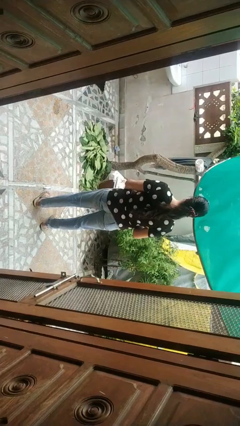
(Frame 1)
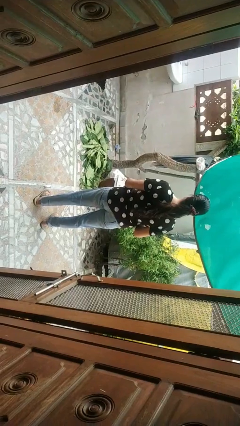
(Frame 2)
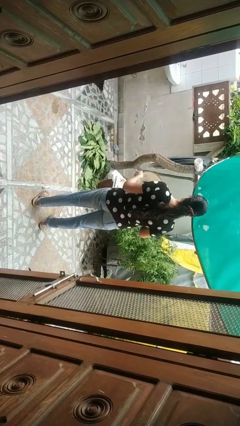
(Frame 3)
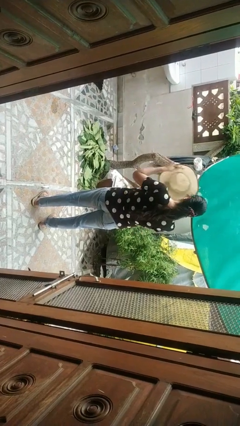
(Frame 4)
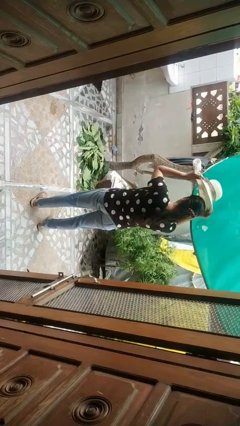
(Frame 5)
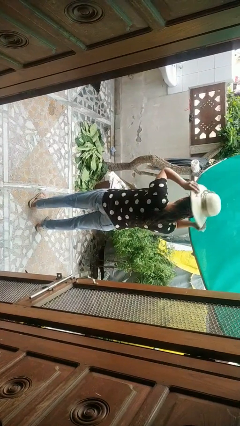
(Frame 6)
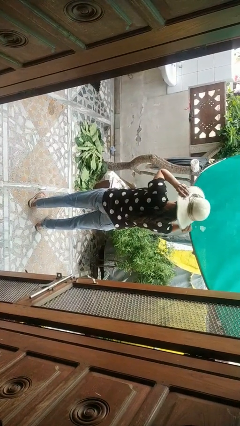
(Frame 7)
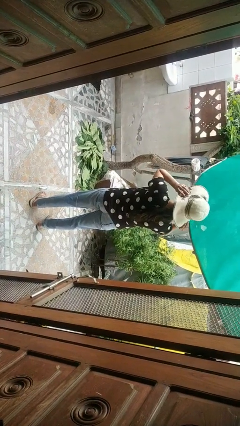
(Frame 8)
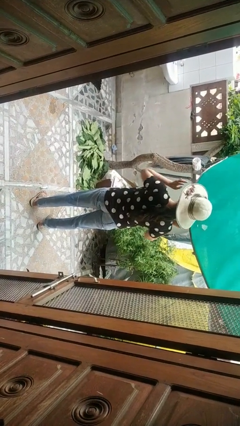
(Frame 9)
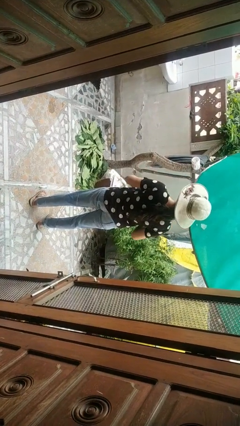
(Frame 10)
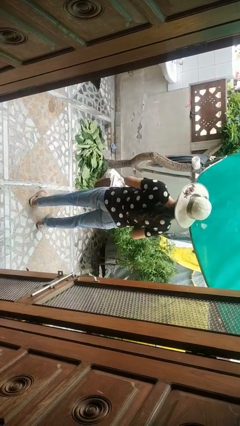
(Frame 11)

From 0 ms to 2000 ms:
person puts on hat

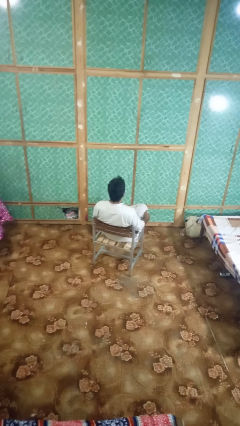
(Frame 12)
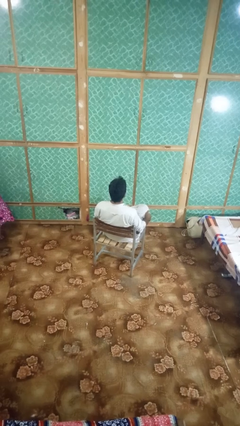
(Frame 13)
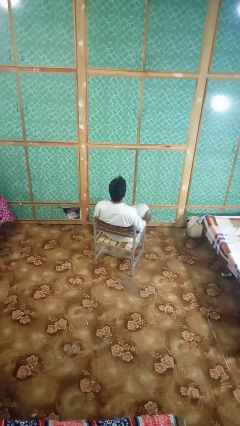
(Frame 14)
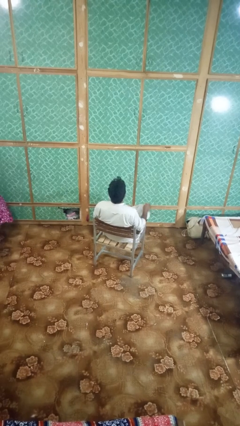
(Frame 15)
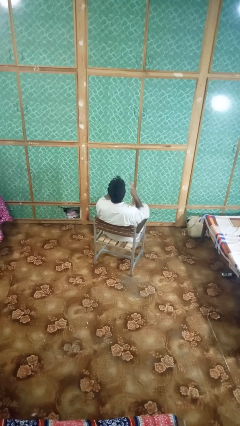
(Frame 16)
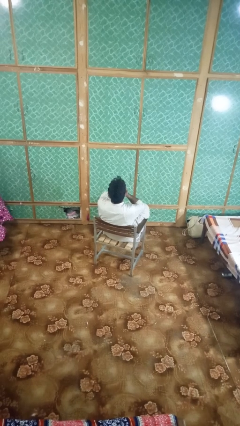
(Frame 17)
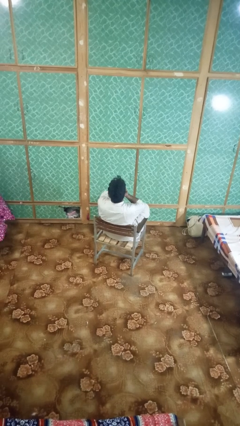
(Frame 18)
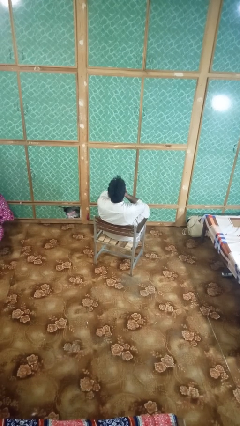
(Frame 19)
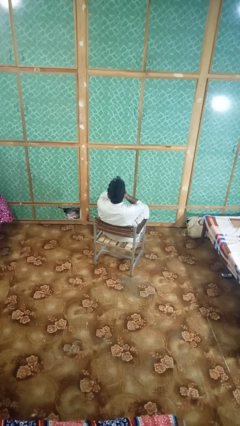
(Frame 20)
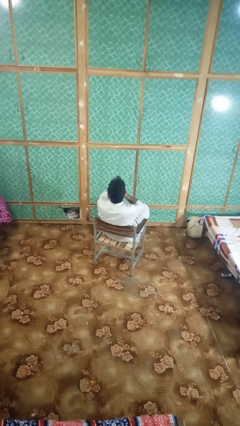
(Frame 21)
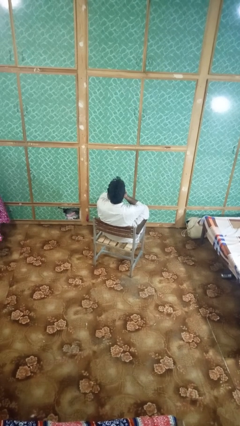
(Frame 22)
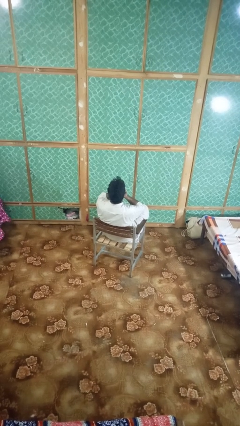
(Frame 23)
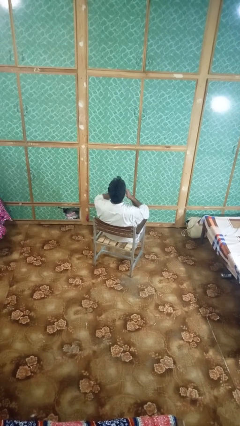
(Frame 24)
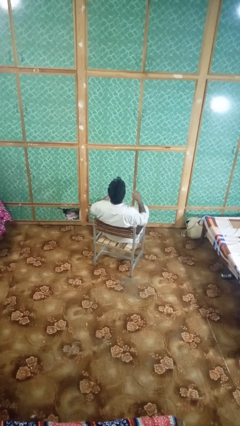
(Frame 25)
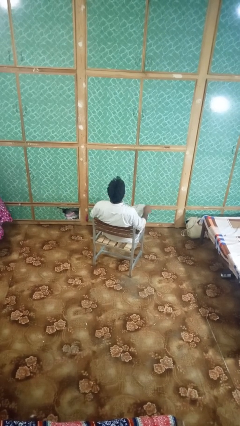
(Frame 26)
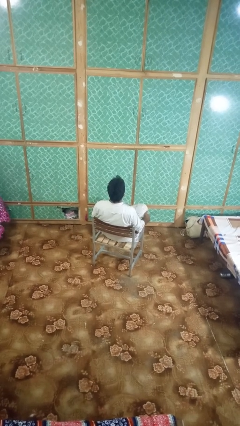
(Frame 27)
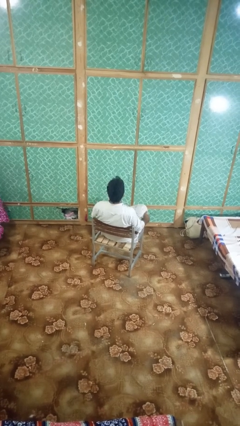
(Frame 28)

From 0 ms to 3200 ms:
person sneezes into hand

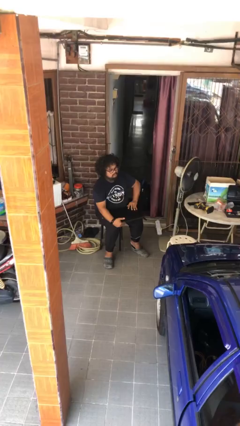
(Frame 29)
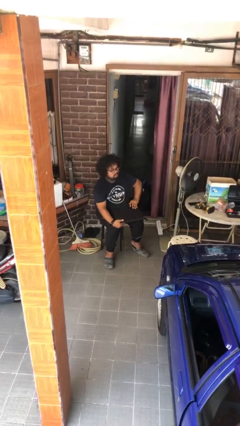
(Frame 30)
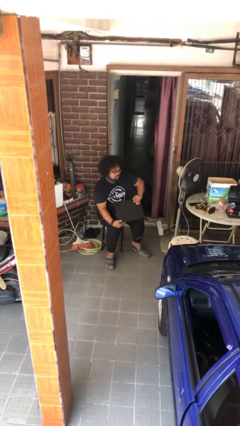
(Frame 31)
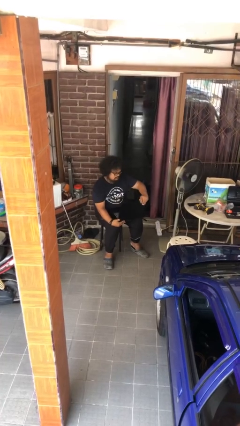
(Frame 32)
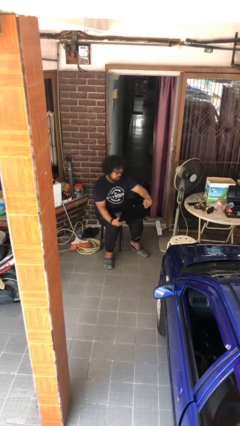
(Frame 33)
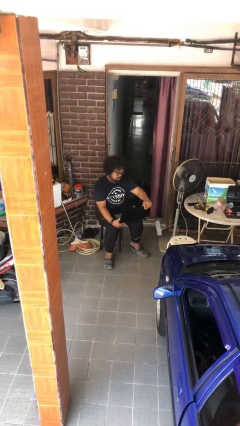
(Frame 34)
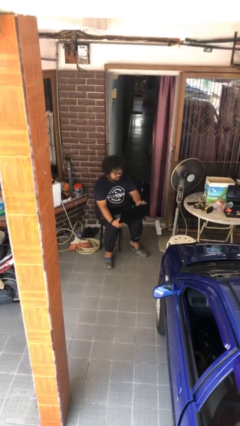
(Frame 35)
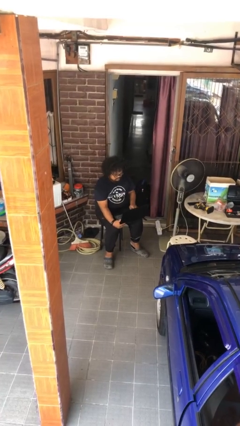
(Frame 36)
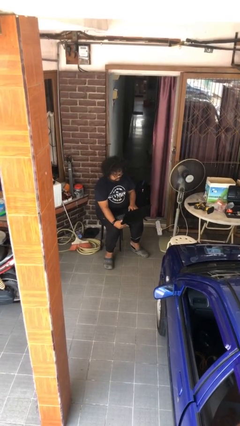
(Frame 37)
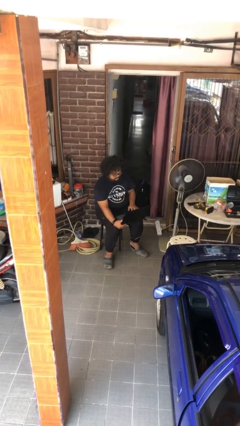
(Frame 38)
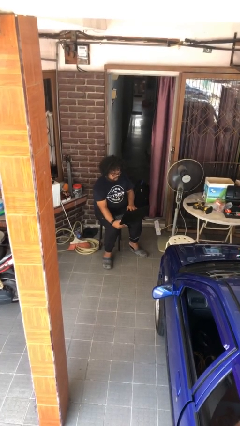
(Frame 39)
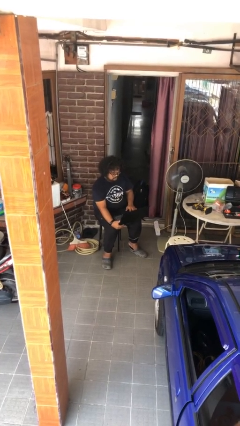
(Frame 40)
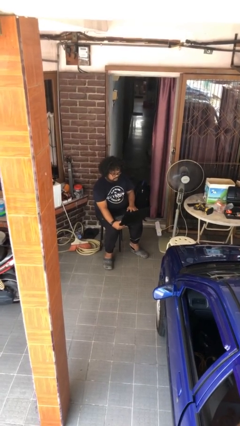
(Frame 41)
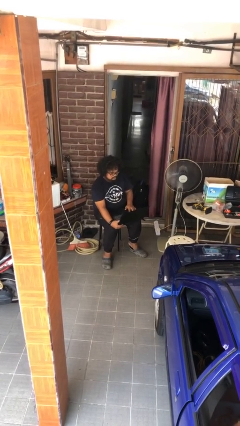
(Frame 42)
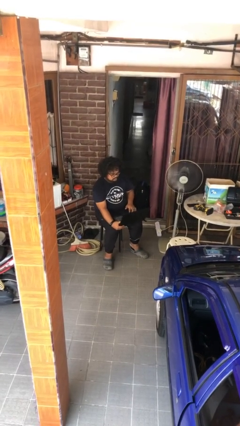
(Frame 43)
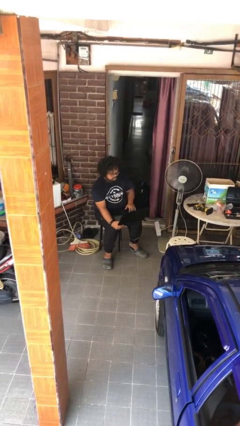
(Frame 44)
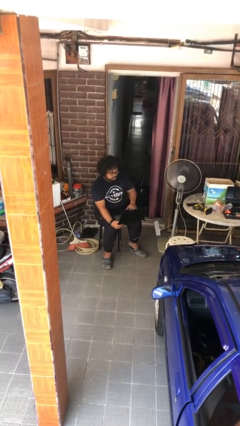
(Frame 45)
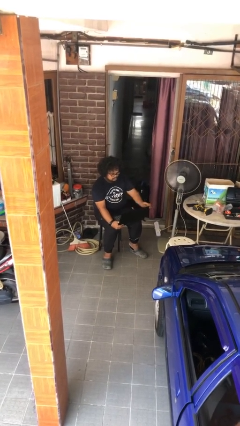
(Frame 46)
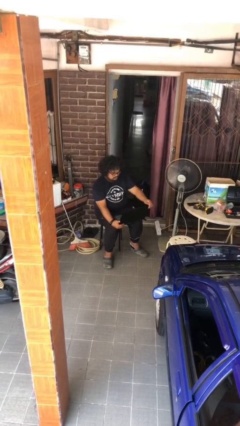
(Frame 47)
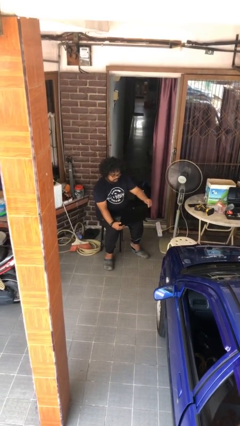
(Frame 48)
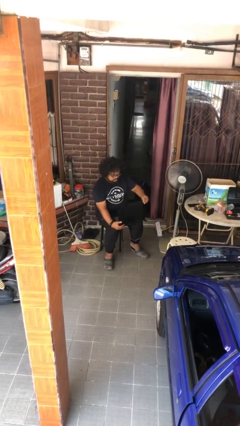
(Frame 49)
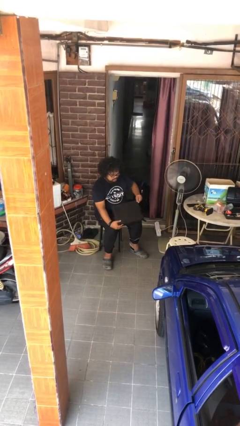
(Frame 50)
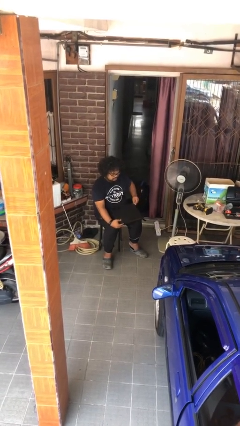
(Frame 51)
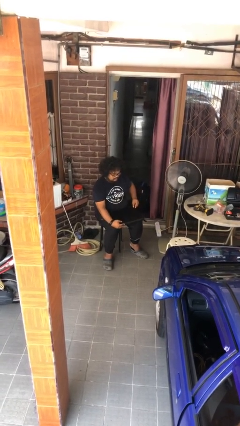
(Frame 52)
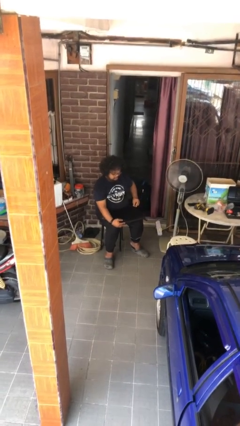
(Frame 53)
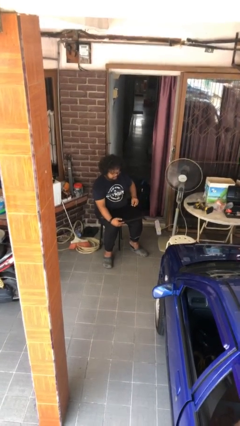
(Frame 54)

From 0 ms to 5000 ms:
person interacts with laptop

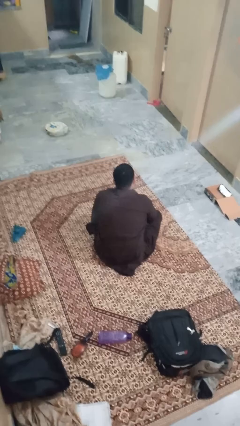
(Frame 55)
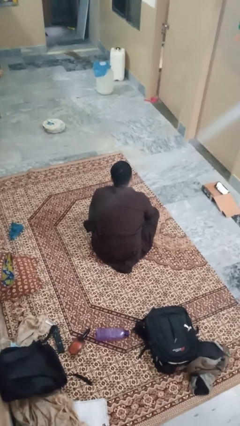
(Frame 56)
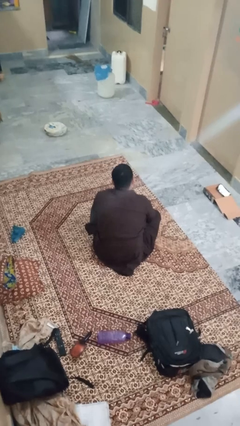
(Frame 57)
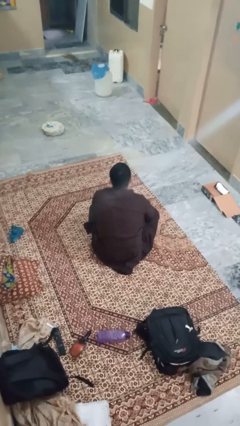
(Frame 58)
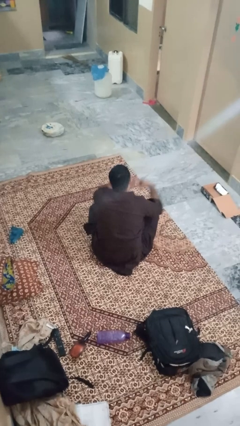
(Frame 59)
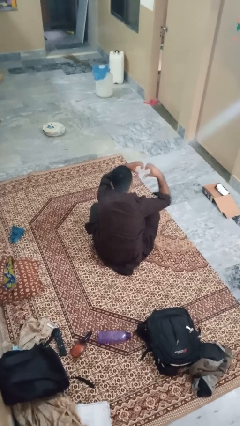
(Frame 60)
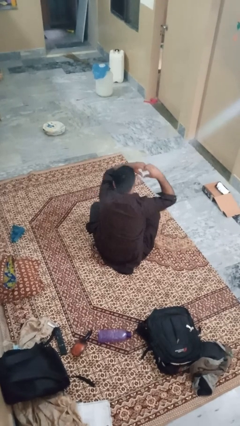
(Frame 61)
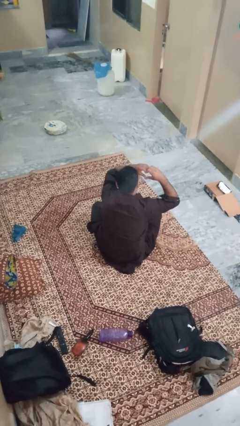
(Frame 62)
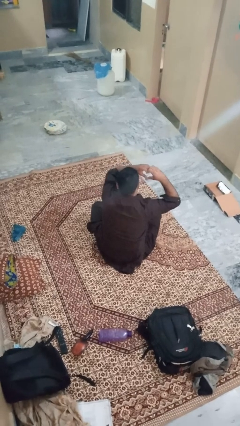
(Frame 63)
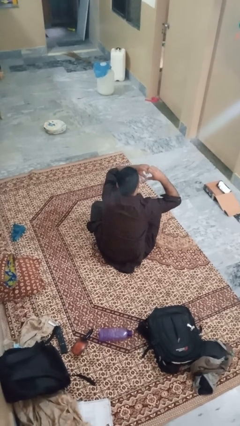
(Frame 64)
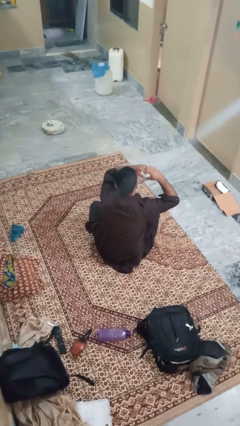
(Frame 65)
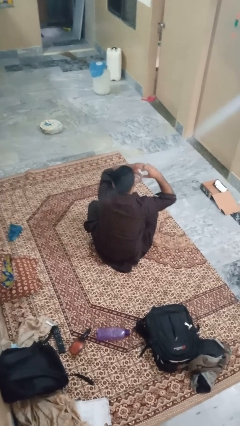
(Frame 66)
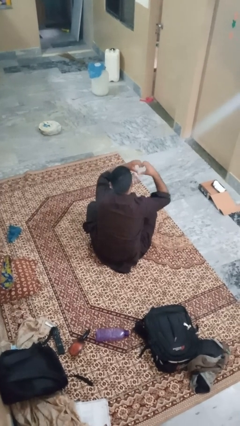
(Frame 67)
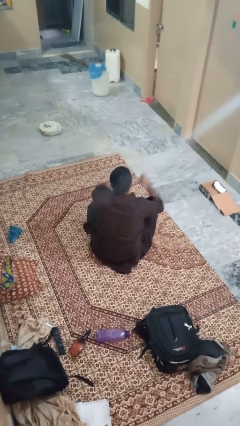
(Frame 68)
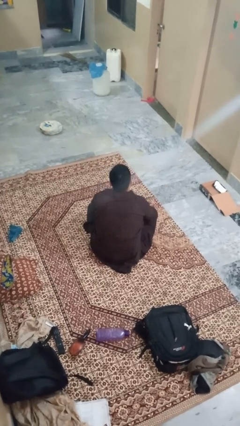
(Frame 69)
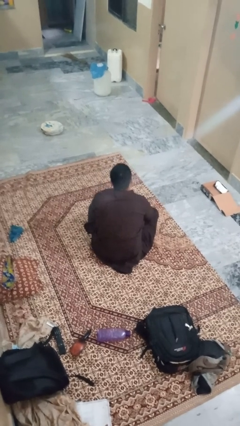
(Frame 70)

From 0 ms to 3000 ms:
person gestures heart

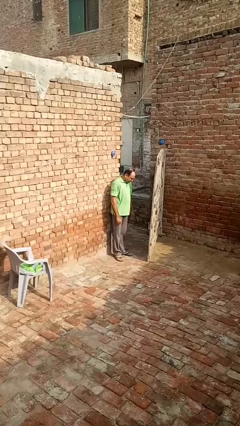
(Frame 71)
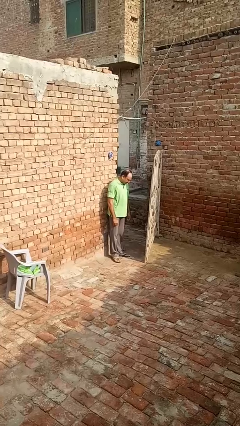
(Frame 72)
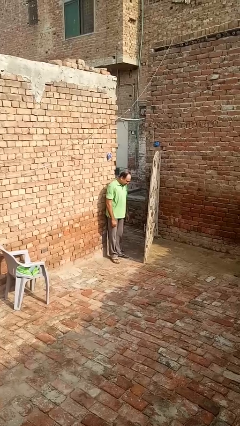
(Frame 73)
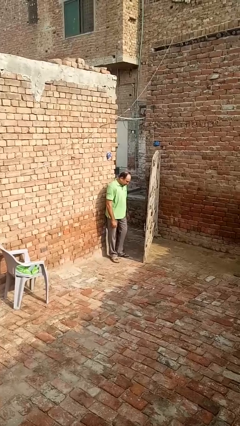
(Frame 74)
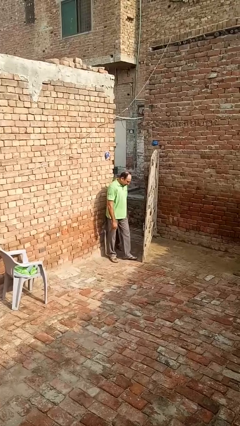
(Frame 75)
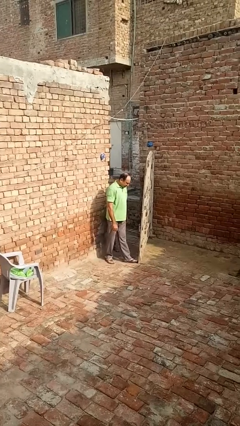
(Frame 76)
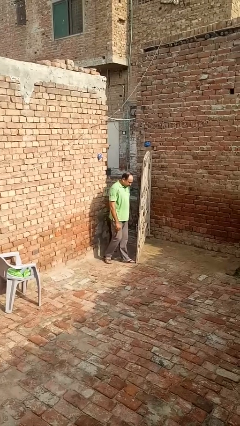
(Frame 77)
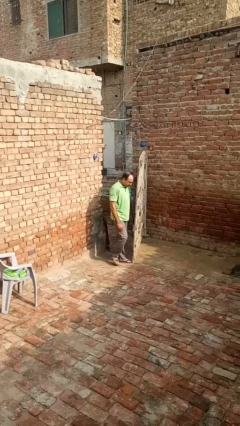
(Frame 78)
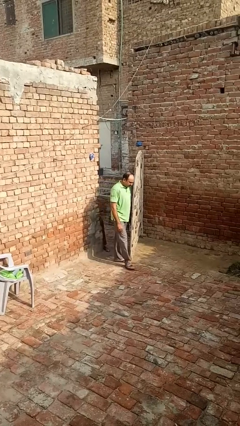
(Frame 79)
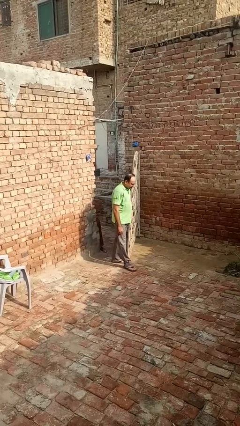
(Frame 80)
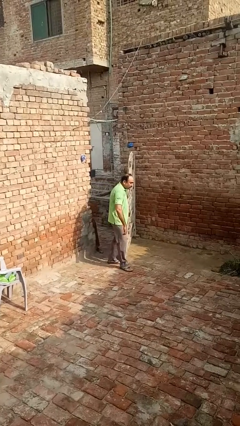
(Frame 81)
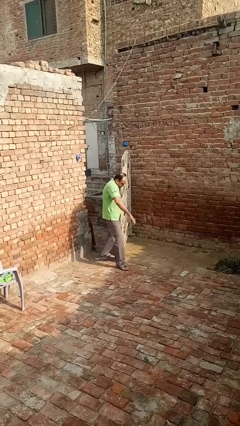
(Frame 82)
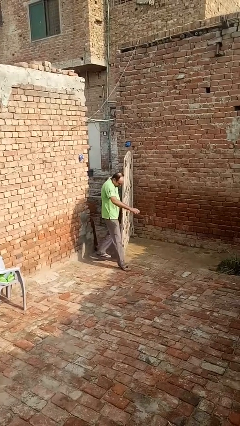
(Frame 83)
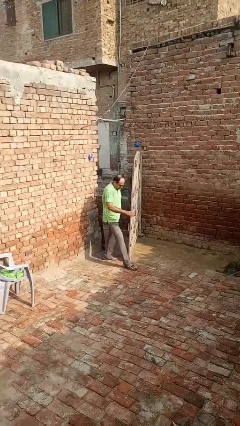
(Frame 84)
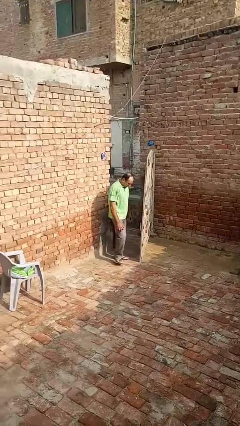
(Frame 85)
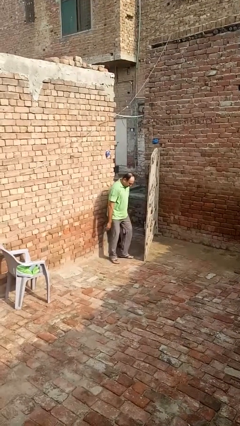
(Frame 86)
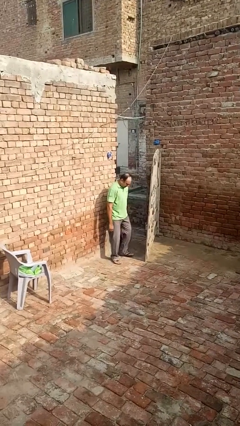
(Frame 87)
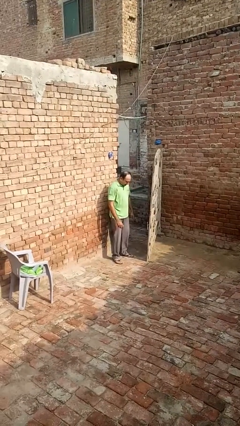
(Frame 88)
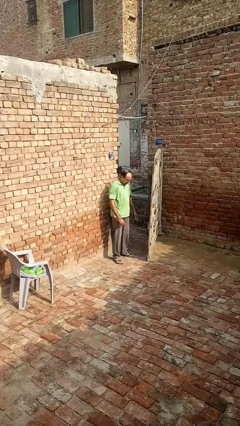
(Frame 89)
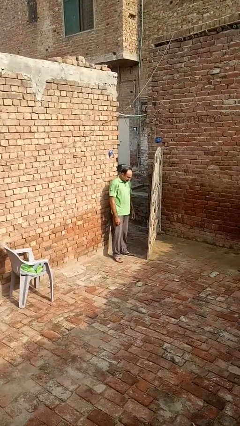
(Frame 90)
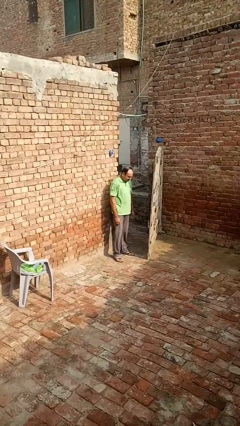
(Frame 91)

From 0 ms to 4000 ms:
person bumps into wall

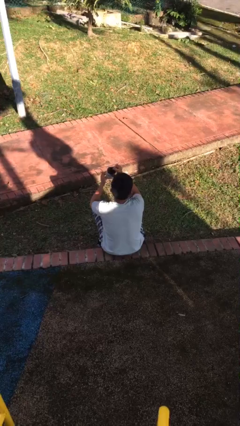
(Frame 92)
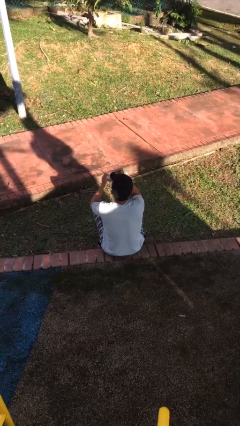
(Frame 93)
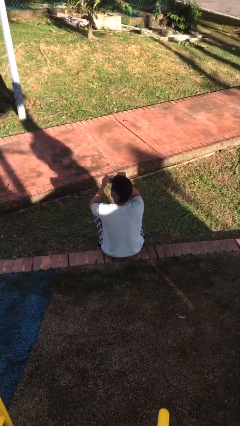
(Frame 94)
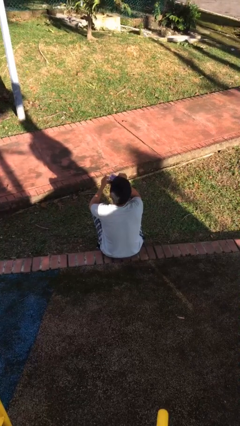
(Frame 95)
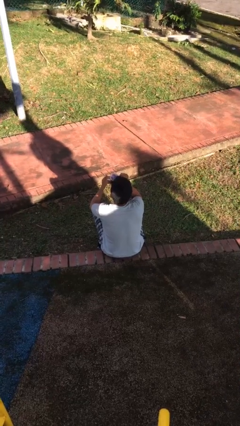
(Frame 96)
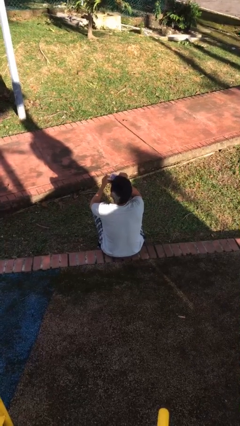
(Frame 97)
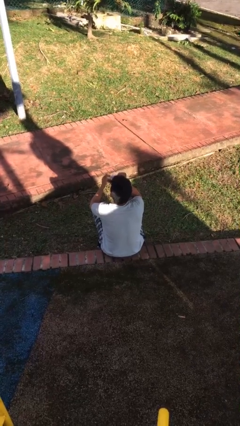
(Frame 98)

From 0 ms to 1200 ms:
person drinks from mug
